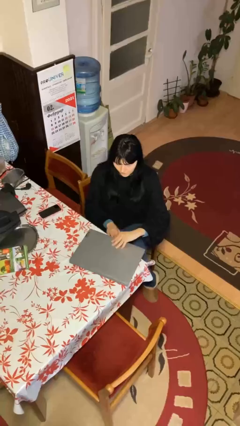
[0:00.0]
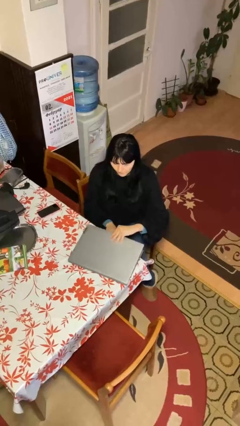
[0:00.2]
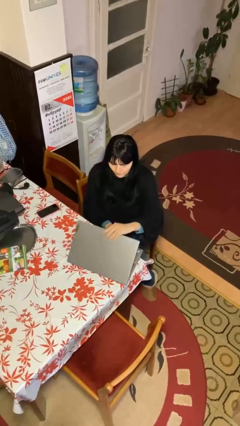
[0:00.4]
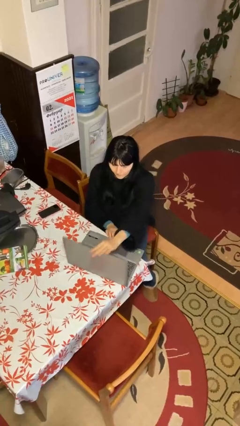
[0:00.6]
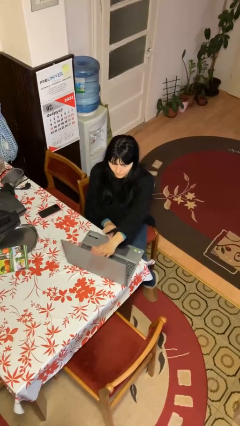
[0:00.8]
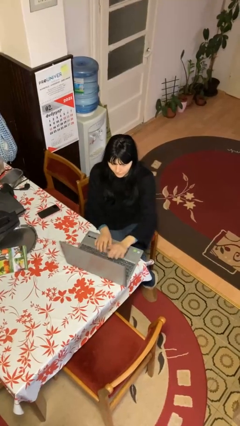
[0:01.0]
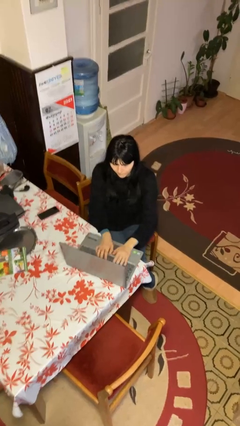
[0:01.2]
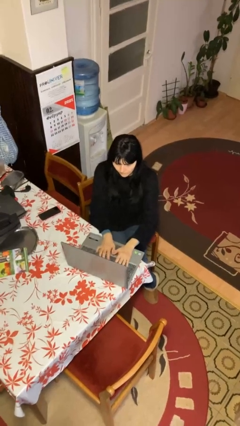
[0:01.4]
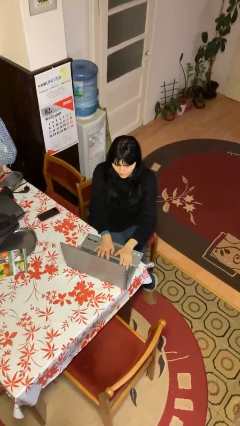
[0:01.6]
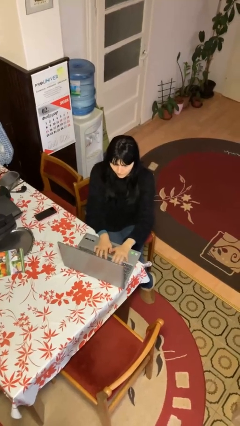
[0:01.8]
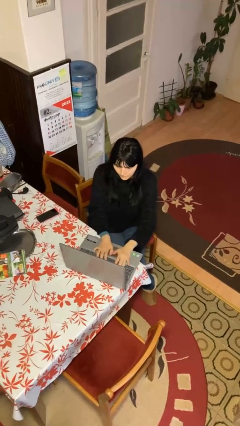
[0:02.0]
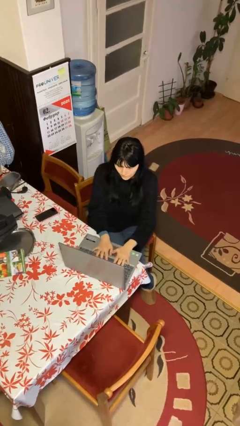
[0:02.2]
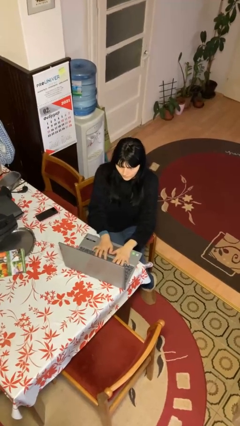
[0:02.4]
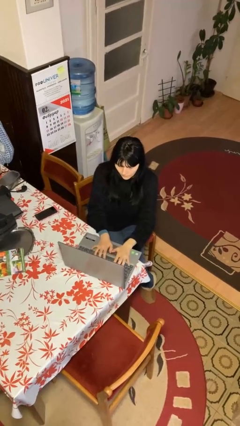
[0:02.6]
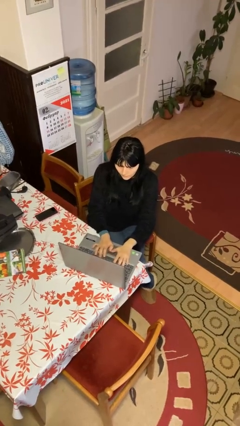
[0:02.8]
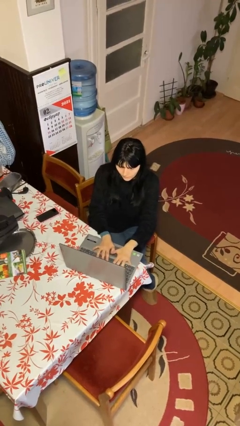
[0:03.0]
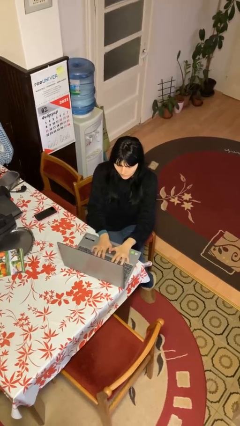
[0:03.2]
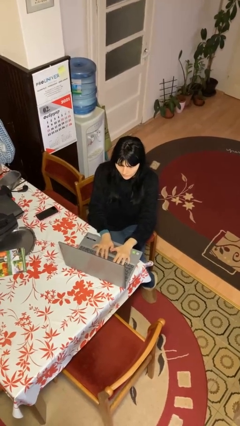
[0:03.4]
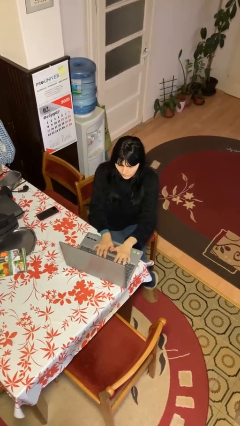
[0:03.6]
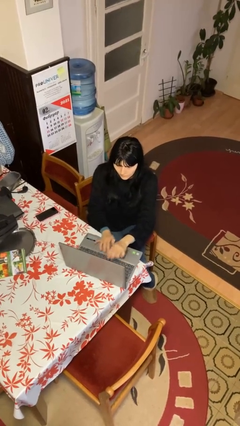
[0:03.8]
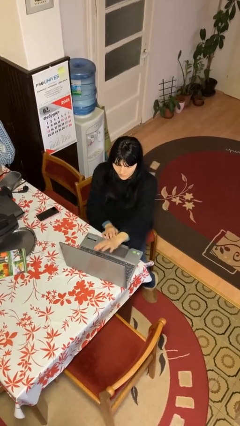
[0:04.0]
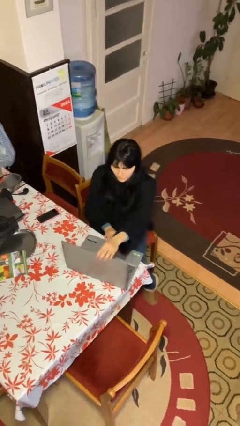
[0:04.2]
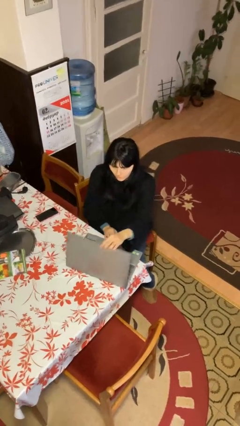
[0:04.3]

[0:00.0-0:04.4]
person interacts with laptop

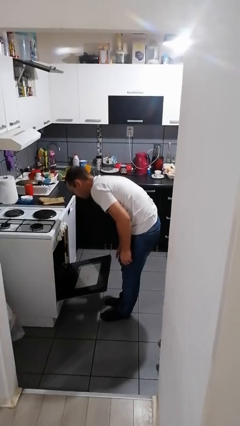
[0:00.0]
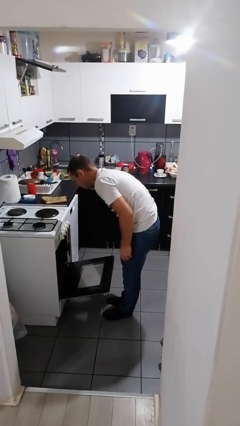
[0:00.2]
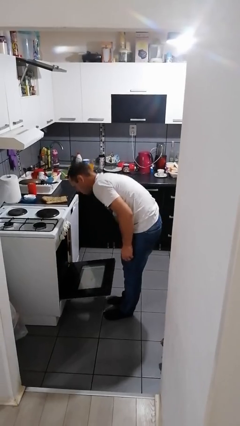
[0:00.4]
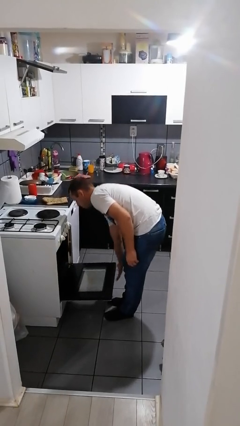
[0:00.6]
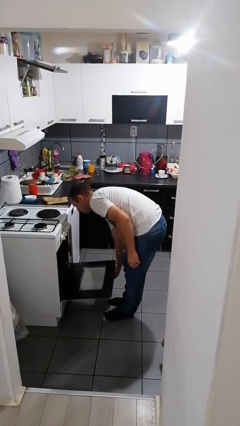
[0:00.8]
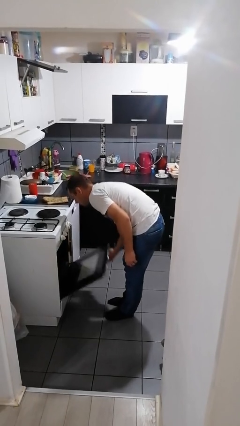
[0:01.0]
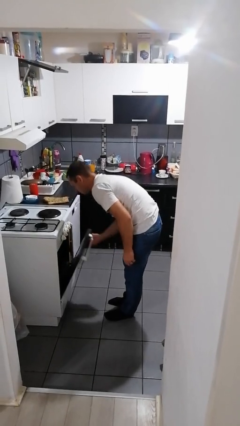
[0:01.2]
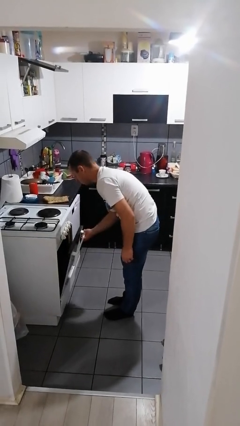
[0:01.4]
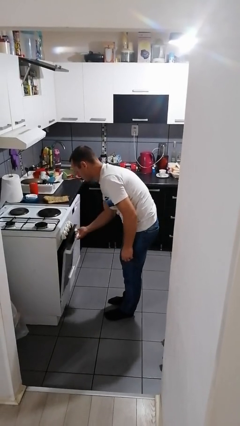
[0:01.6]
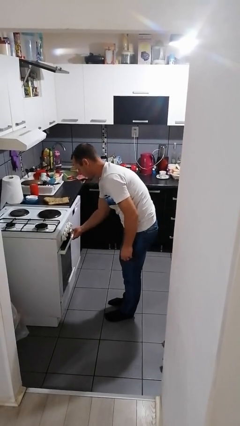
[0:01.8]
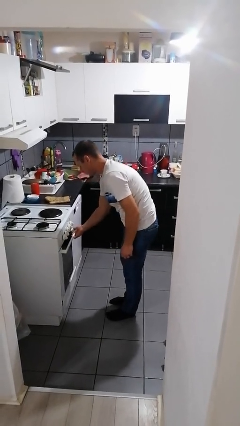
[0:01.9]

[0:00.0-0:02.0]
person closes oven door

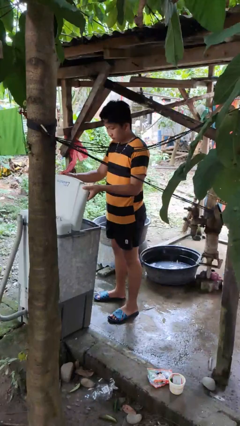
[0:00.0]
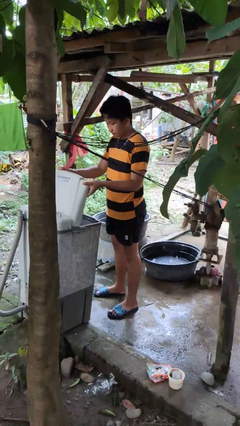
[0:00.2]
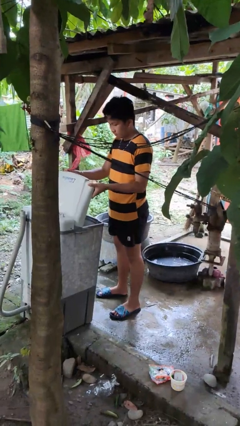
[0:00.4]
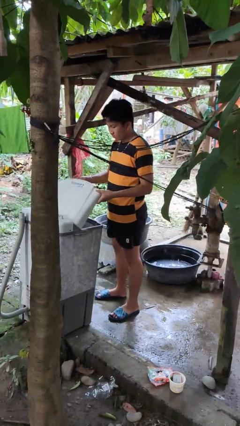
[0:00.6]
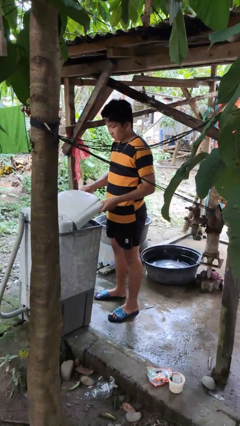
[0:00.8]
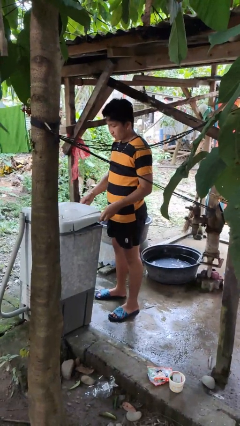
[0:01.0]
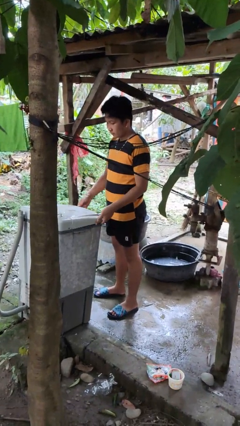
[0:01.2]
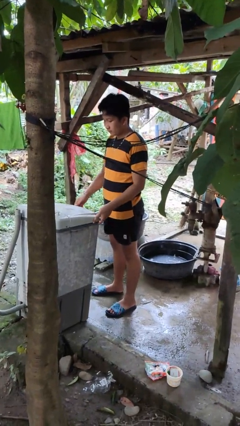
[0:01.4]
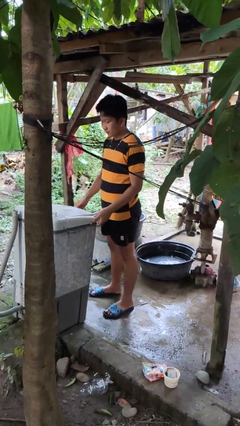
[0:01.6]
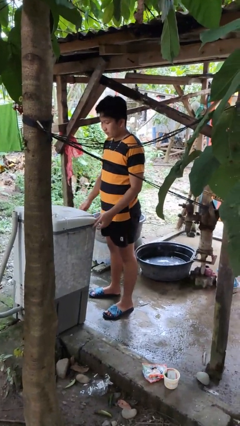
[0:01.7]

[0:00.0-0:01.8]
person closes clothes washer

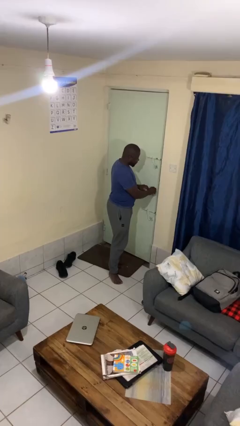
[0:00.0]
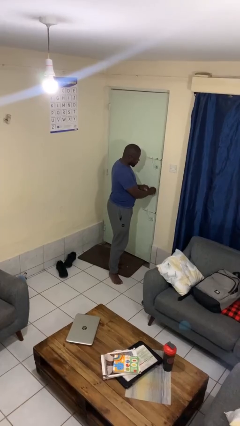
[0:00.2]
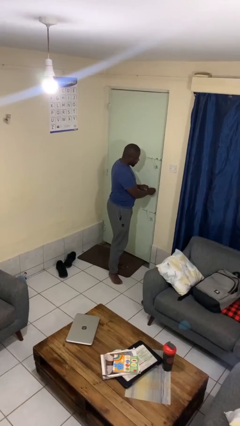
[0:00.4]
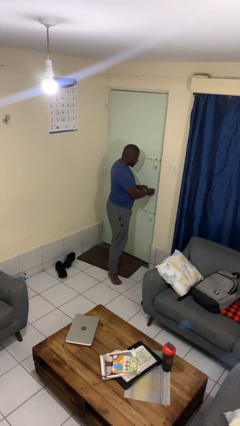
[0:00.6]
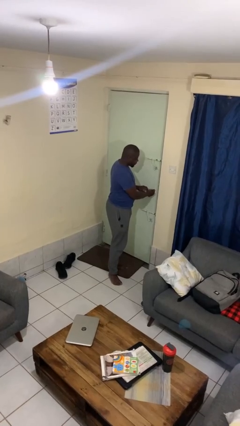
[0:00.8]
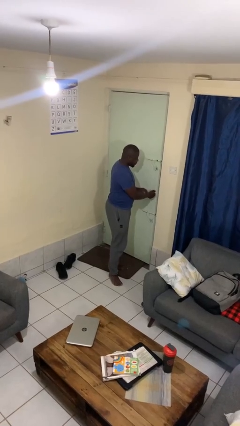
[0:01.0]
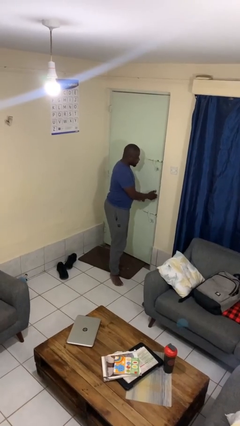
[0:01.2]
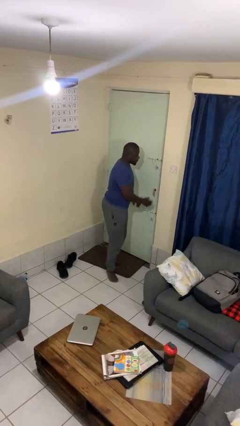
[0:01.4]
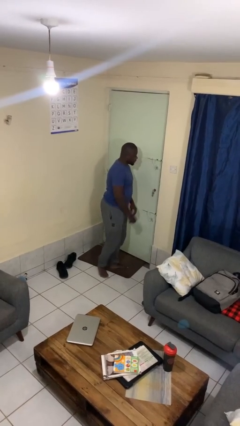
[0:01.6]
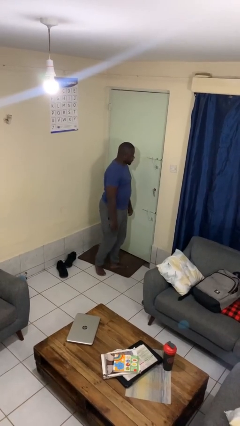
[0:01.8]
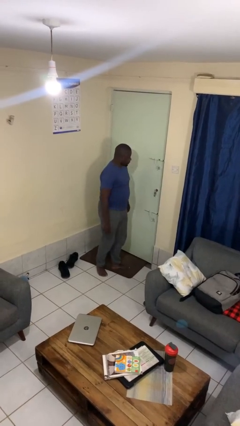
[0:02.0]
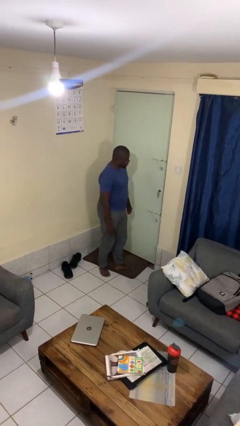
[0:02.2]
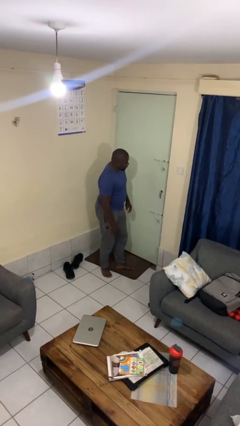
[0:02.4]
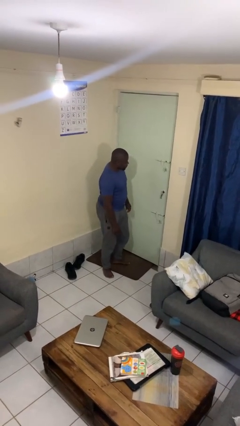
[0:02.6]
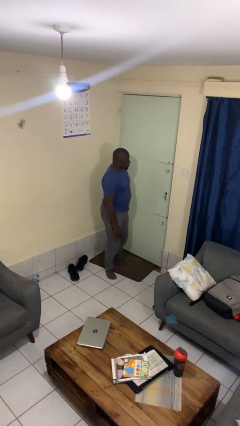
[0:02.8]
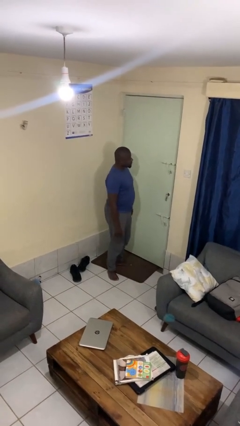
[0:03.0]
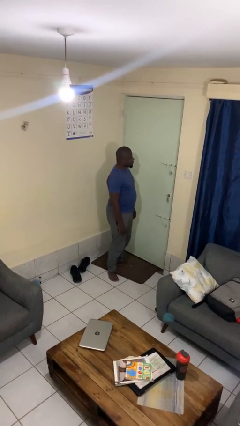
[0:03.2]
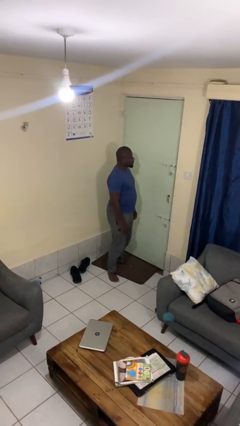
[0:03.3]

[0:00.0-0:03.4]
person locks door with keys

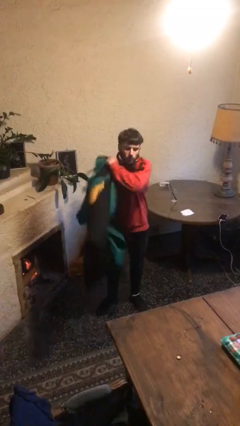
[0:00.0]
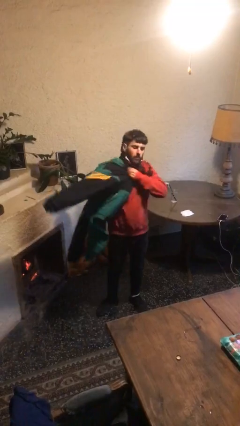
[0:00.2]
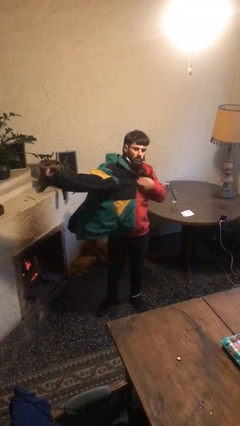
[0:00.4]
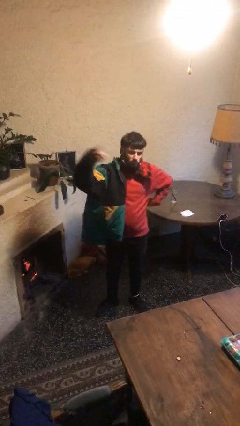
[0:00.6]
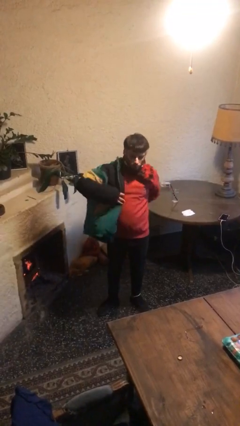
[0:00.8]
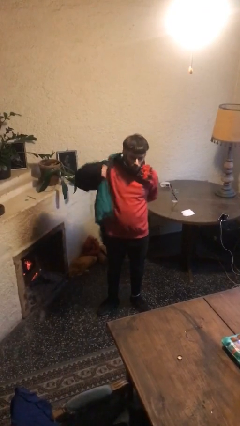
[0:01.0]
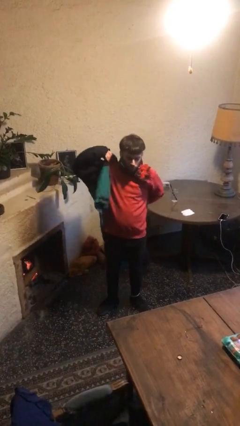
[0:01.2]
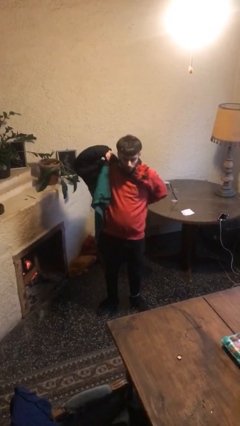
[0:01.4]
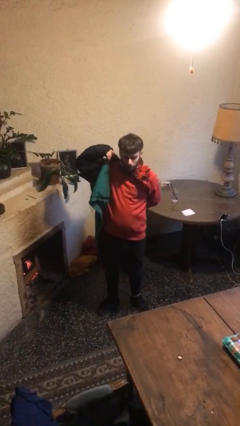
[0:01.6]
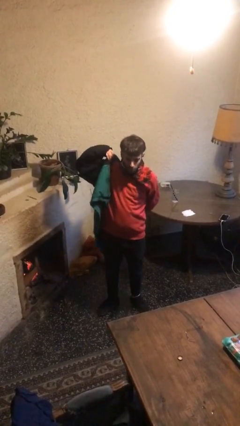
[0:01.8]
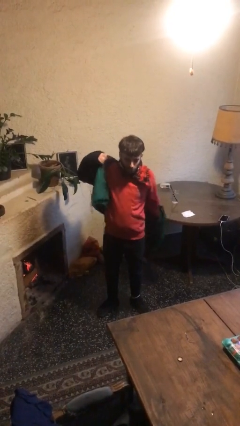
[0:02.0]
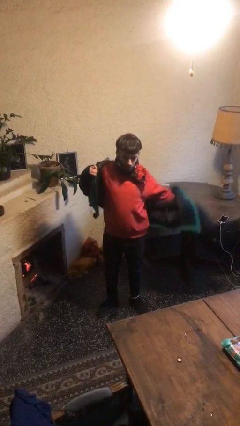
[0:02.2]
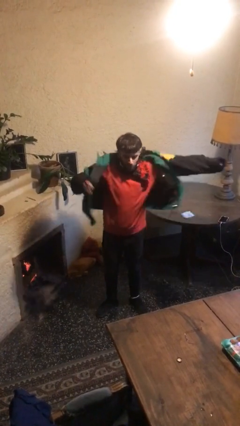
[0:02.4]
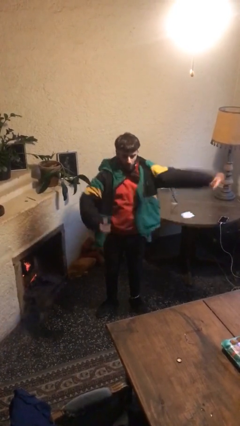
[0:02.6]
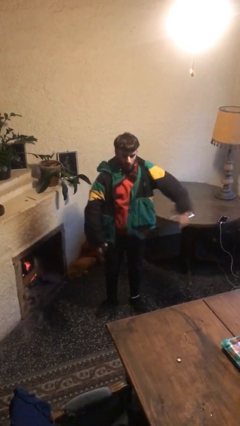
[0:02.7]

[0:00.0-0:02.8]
person puts on jacket

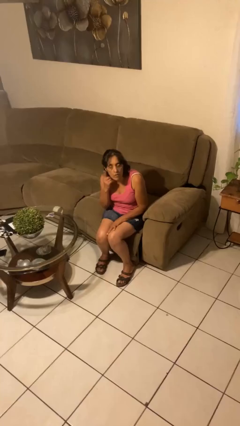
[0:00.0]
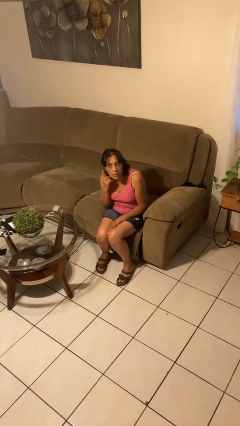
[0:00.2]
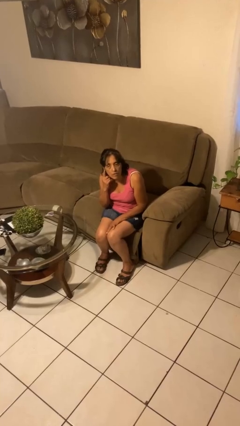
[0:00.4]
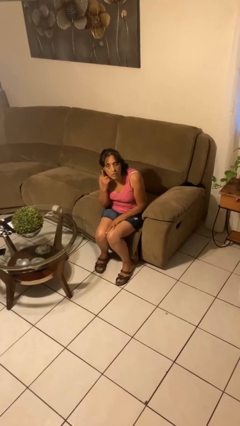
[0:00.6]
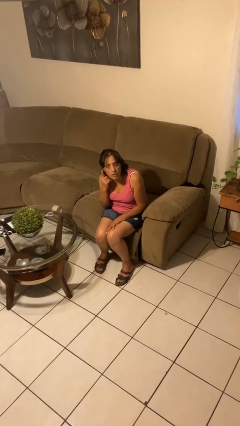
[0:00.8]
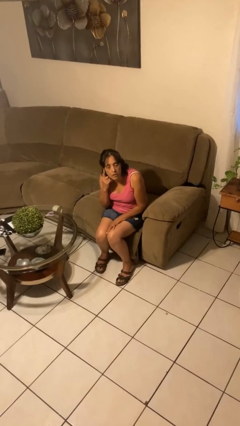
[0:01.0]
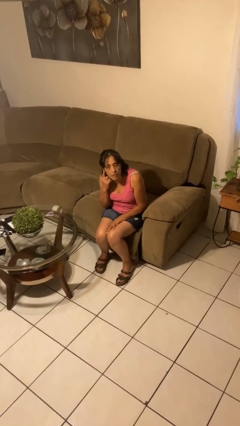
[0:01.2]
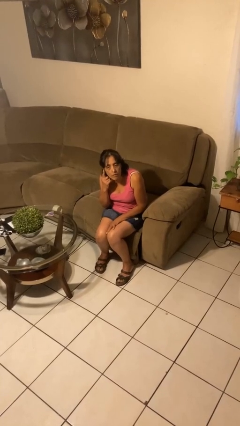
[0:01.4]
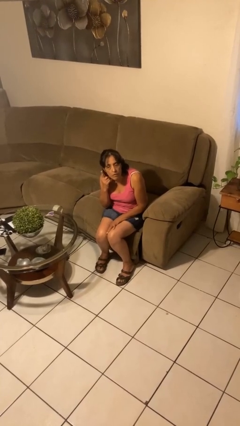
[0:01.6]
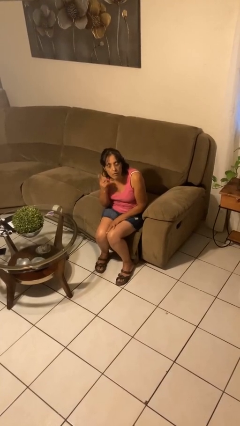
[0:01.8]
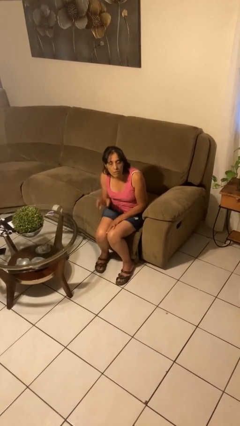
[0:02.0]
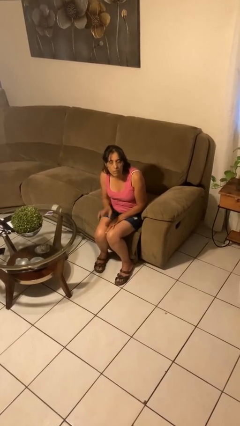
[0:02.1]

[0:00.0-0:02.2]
person gestures listen closely

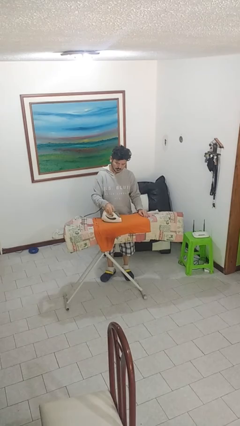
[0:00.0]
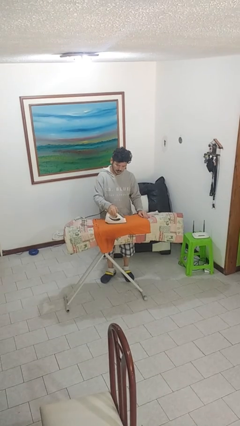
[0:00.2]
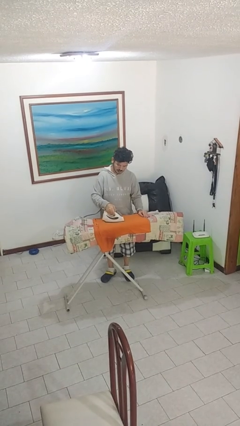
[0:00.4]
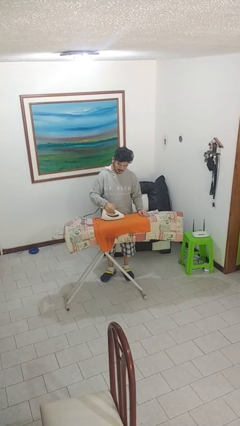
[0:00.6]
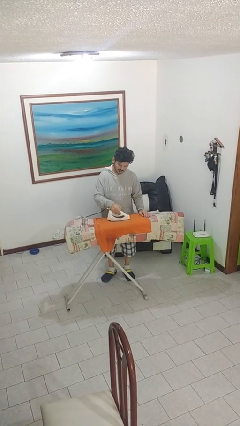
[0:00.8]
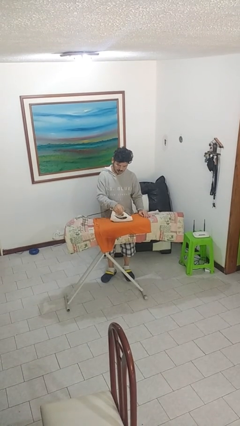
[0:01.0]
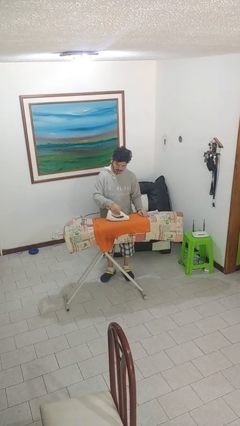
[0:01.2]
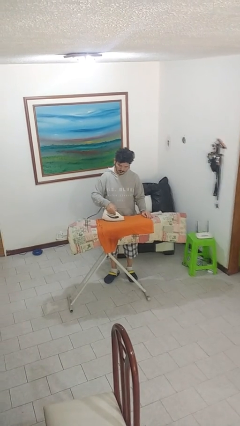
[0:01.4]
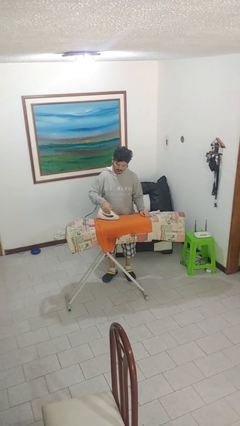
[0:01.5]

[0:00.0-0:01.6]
person irons clothes
